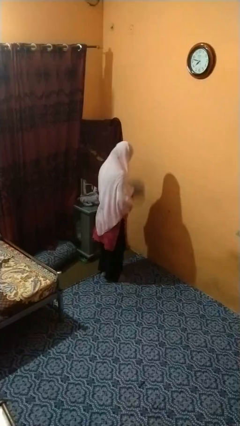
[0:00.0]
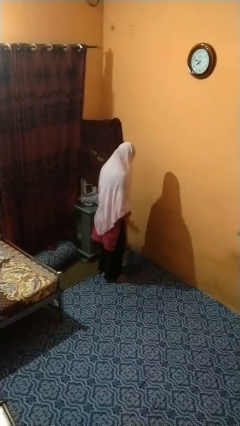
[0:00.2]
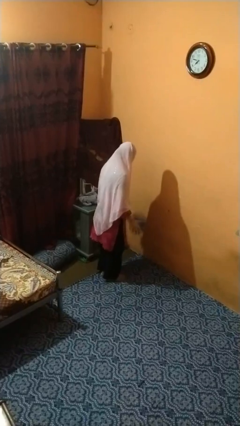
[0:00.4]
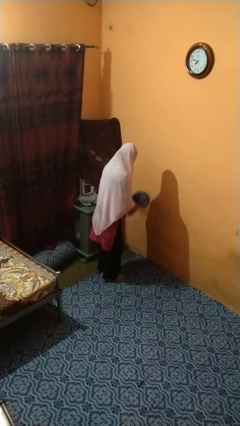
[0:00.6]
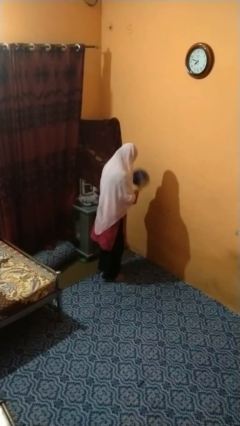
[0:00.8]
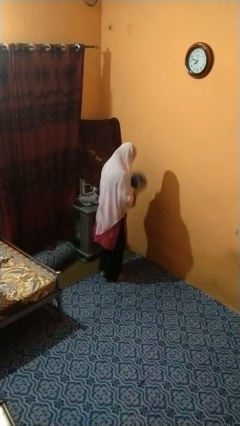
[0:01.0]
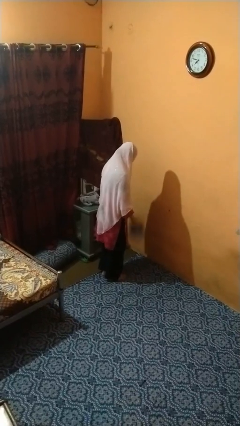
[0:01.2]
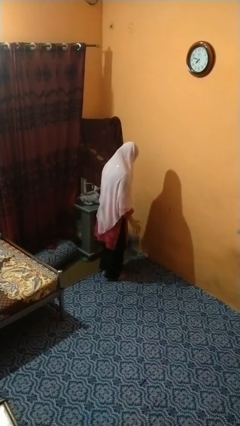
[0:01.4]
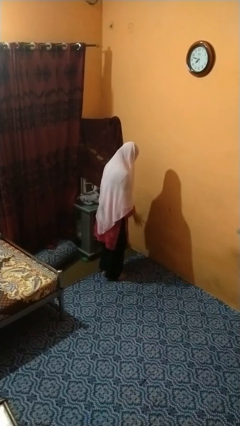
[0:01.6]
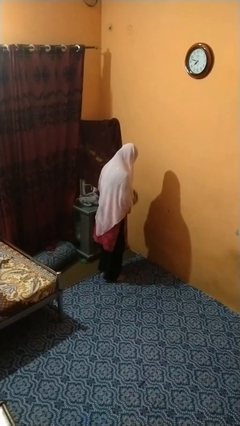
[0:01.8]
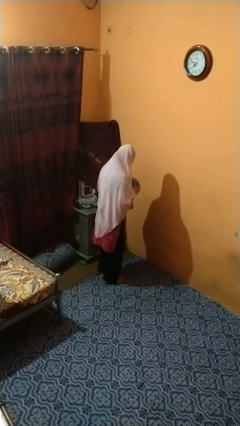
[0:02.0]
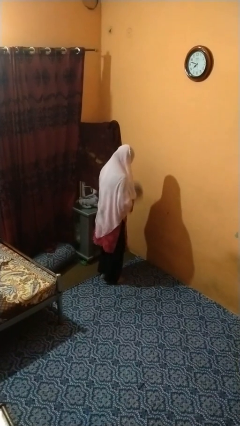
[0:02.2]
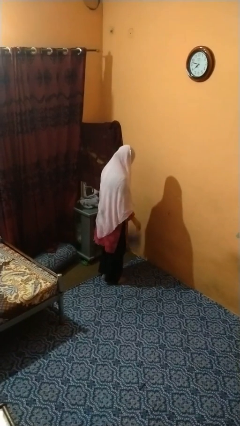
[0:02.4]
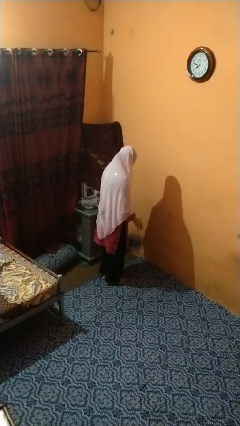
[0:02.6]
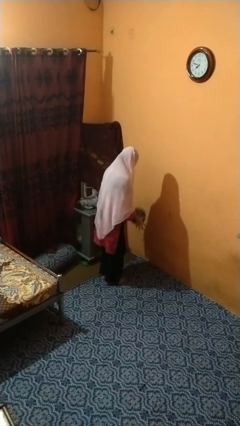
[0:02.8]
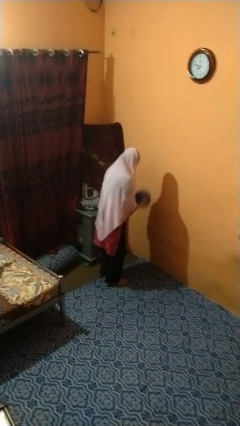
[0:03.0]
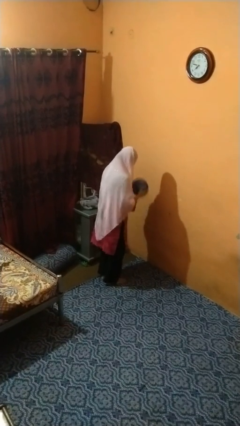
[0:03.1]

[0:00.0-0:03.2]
person bounces ball on floor

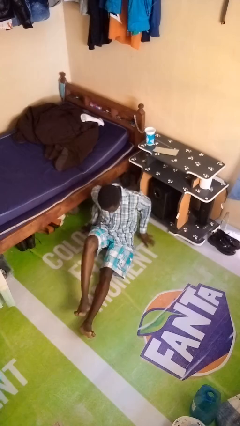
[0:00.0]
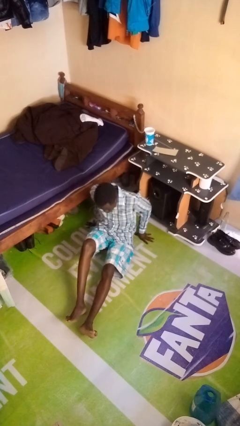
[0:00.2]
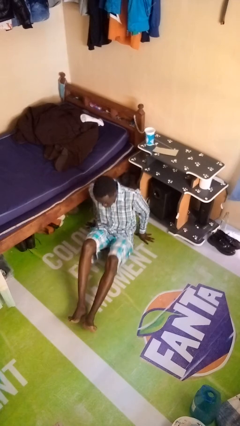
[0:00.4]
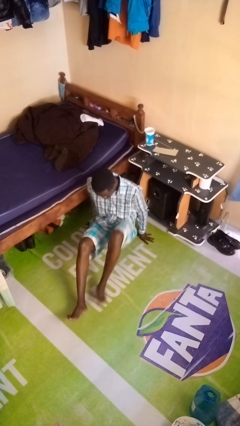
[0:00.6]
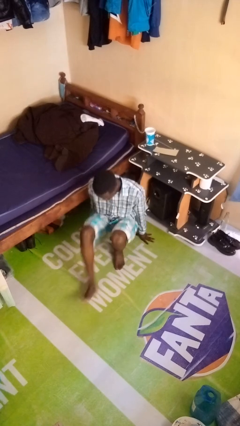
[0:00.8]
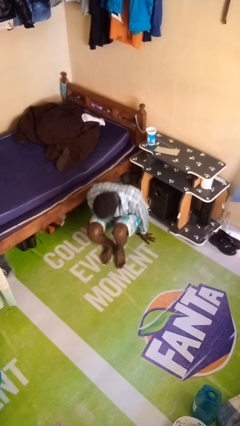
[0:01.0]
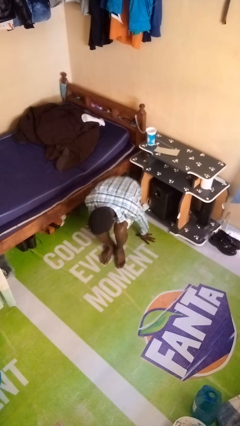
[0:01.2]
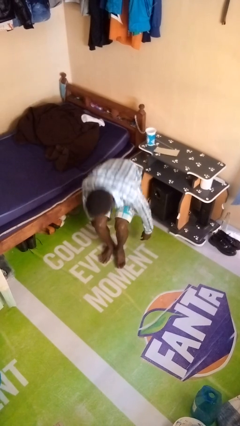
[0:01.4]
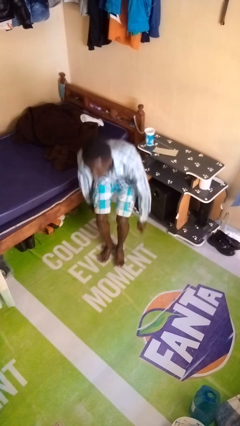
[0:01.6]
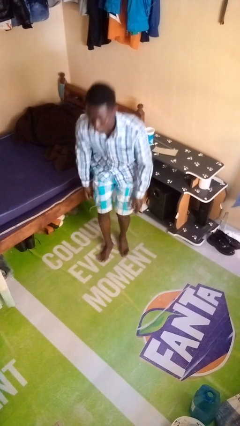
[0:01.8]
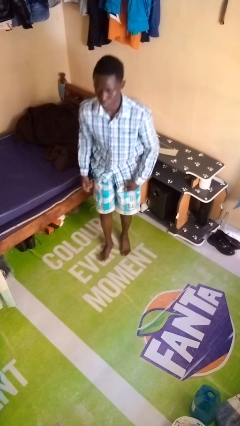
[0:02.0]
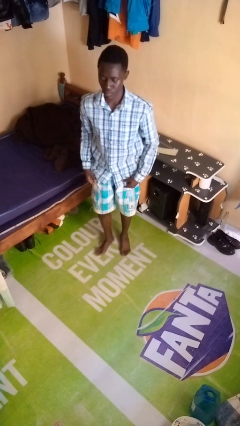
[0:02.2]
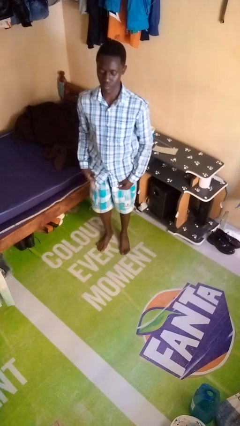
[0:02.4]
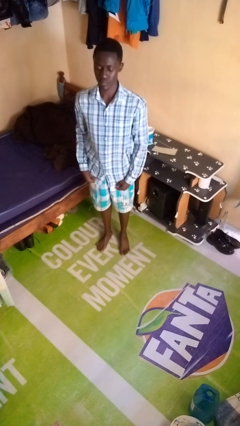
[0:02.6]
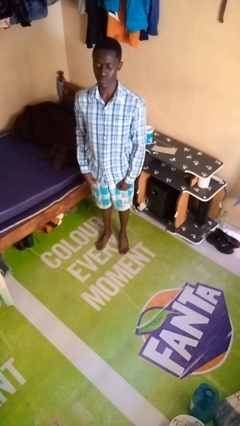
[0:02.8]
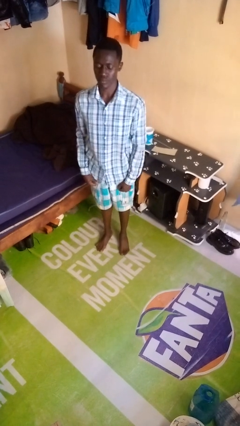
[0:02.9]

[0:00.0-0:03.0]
person stands up from floor

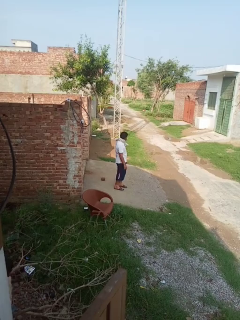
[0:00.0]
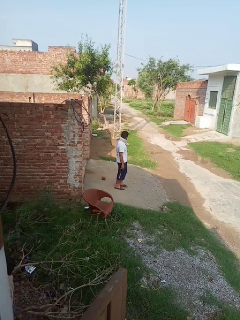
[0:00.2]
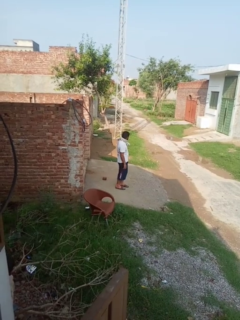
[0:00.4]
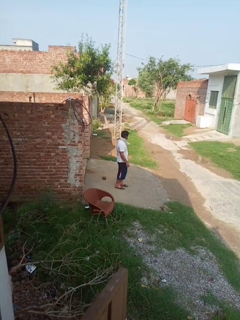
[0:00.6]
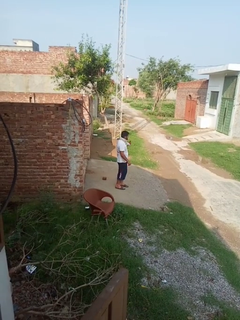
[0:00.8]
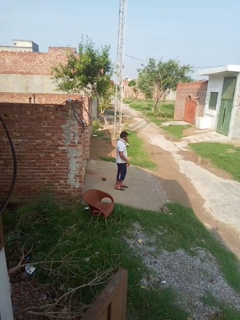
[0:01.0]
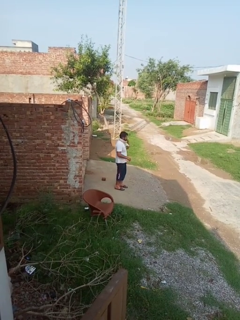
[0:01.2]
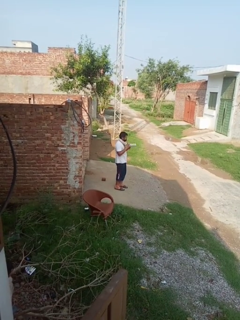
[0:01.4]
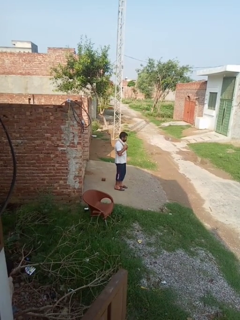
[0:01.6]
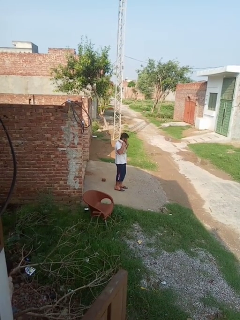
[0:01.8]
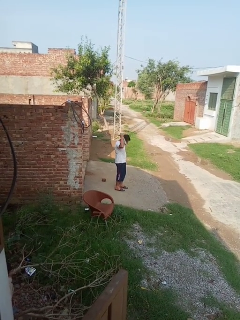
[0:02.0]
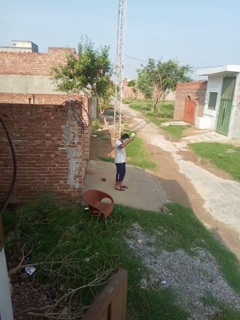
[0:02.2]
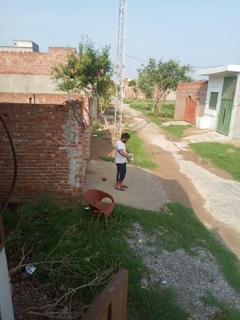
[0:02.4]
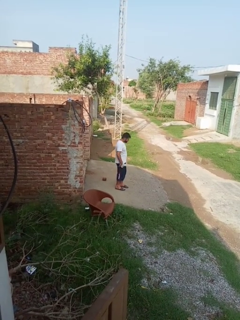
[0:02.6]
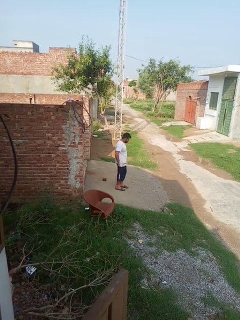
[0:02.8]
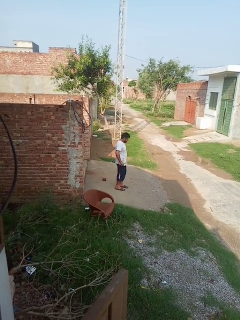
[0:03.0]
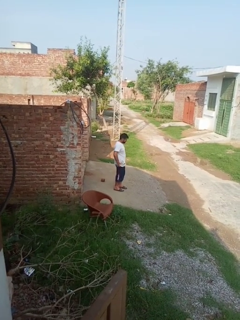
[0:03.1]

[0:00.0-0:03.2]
person takes off scarf

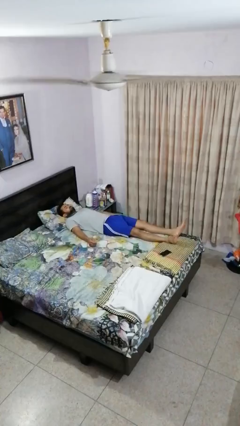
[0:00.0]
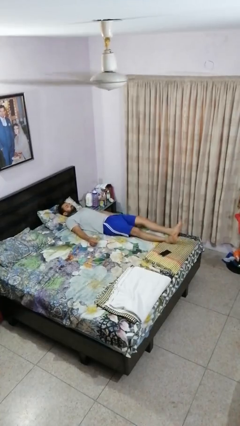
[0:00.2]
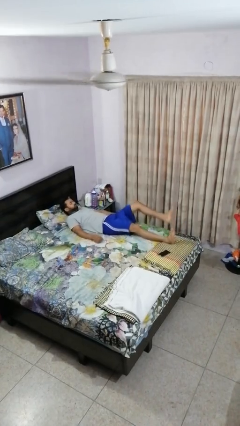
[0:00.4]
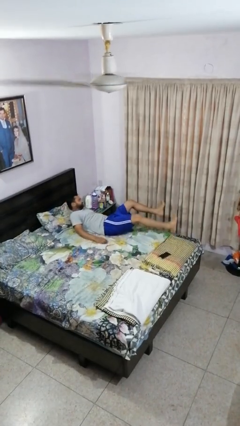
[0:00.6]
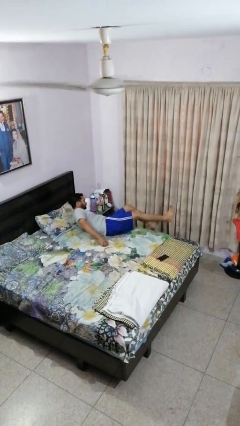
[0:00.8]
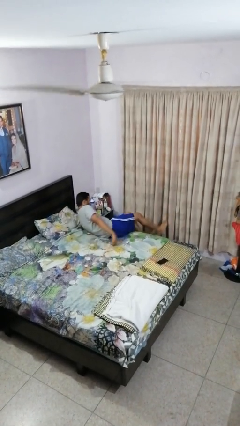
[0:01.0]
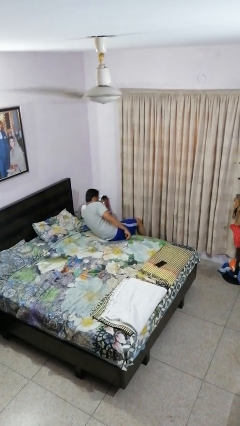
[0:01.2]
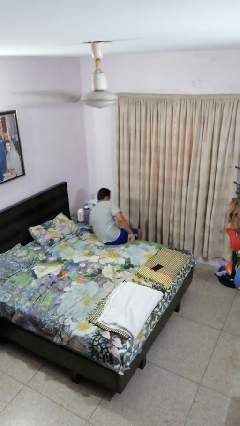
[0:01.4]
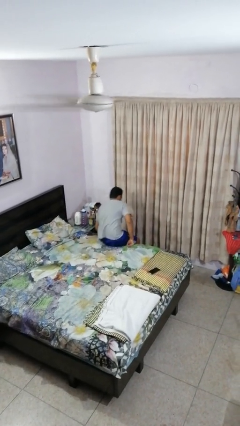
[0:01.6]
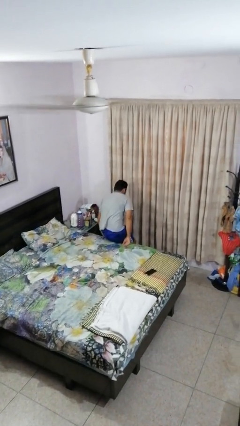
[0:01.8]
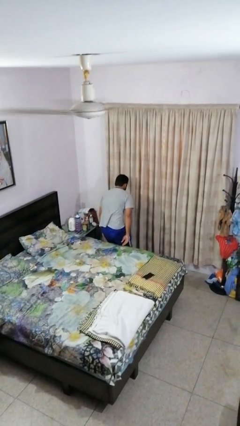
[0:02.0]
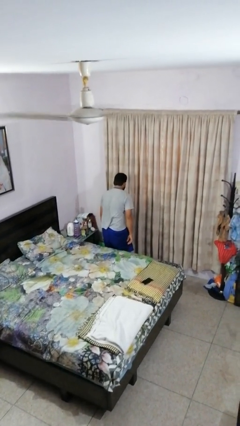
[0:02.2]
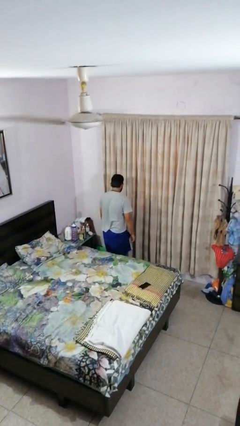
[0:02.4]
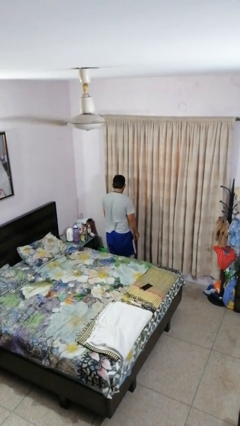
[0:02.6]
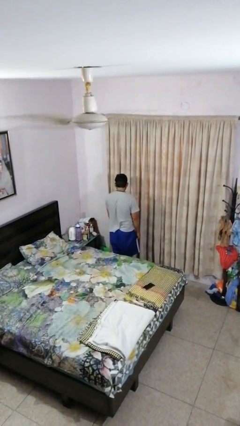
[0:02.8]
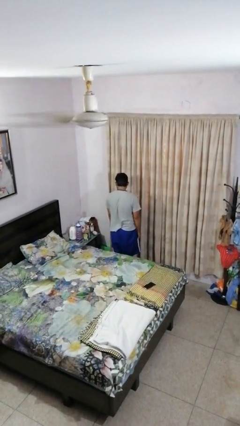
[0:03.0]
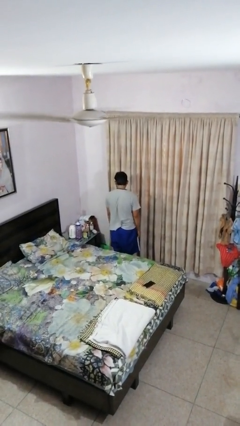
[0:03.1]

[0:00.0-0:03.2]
person stands up

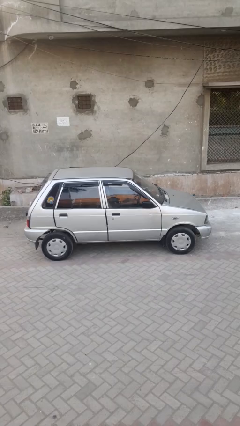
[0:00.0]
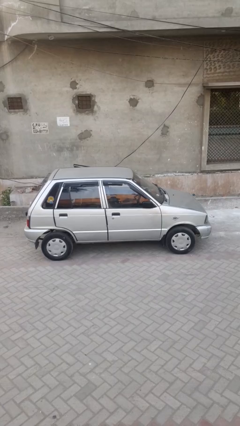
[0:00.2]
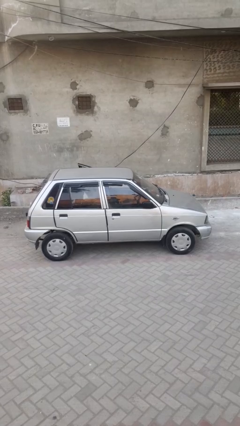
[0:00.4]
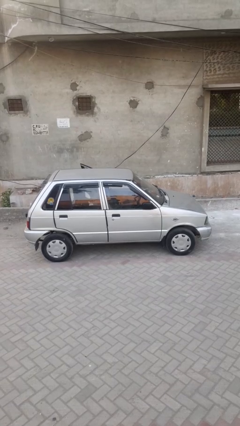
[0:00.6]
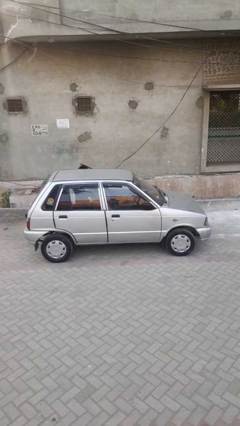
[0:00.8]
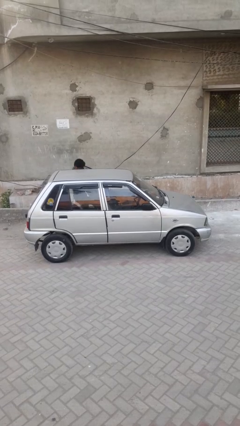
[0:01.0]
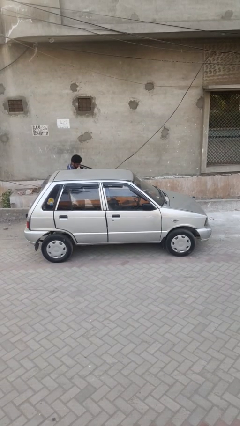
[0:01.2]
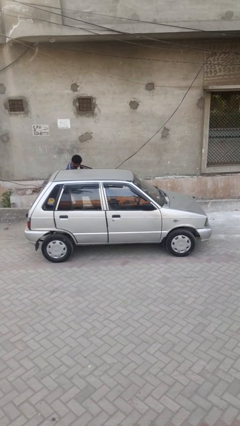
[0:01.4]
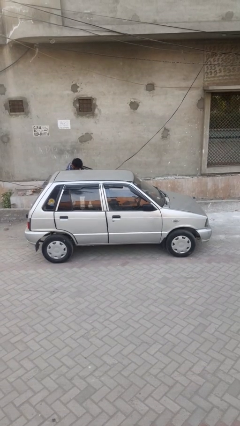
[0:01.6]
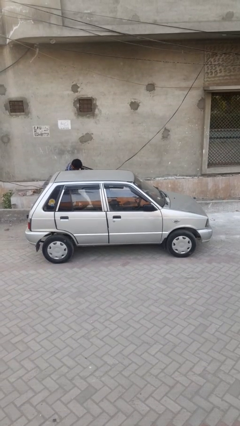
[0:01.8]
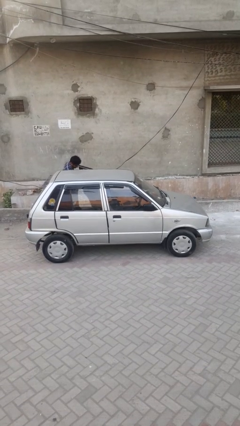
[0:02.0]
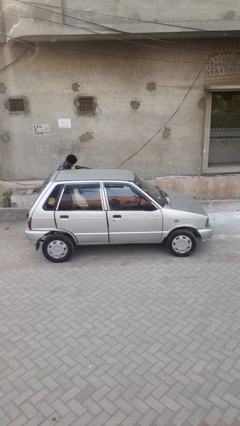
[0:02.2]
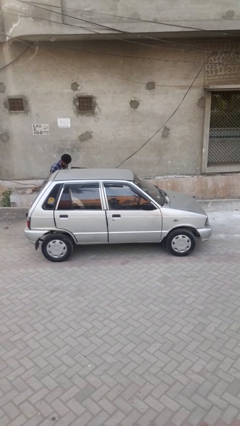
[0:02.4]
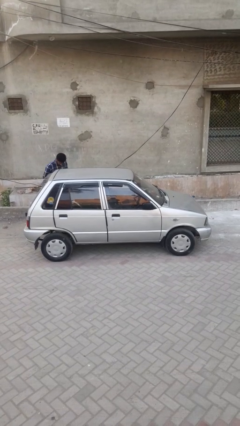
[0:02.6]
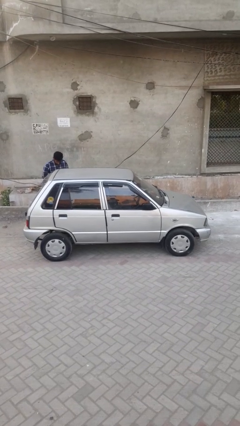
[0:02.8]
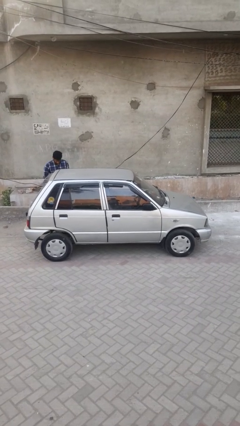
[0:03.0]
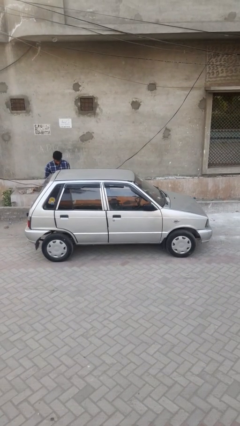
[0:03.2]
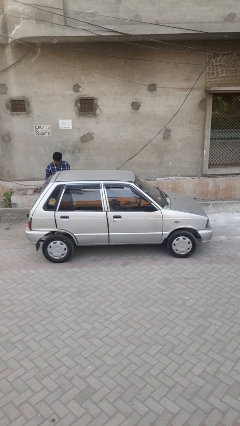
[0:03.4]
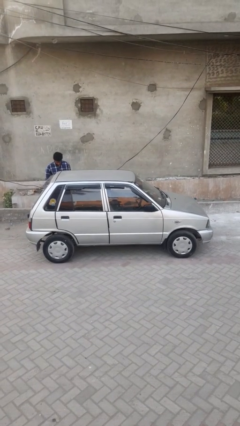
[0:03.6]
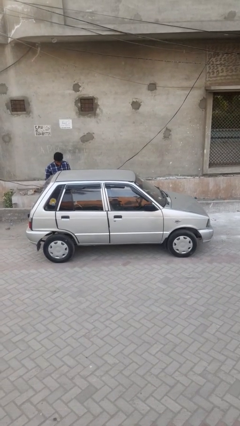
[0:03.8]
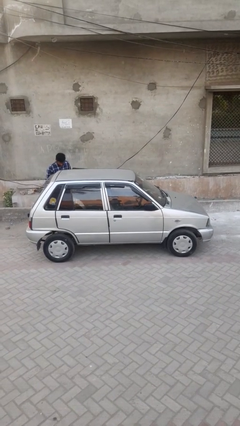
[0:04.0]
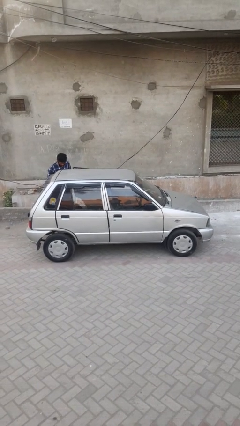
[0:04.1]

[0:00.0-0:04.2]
car drops off person

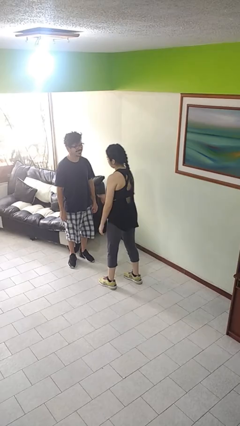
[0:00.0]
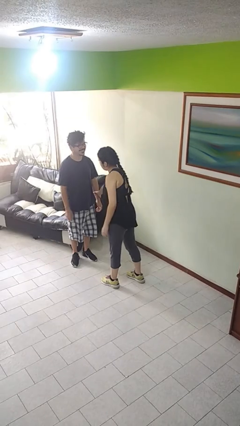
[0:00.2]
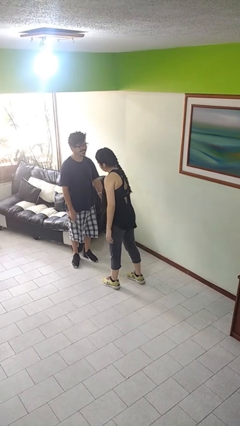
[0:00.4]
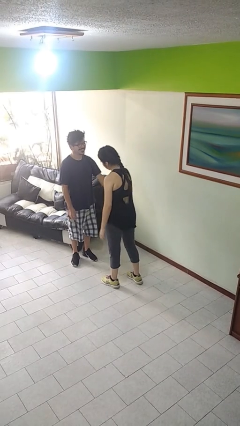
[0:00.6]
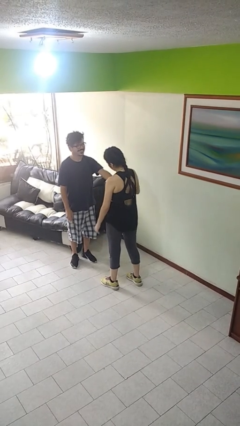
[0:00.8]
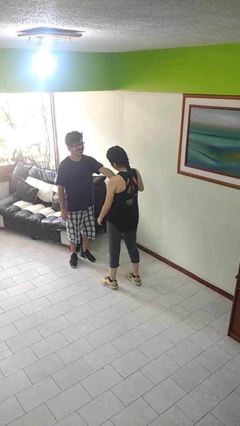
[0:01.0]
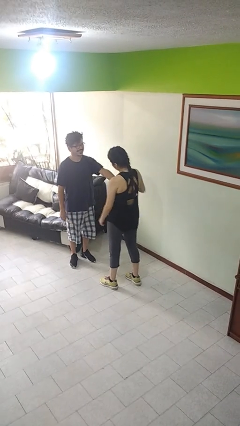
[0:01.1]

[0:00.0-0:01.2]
person grabs person by forearm
